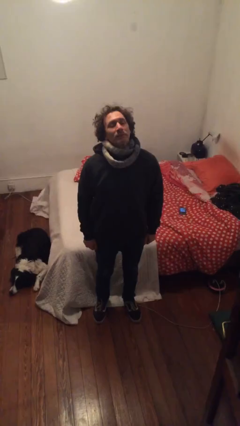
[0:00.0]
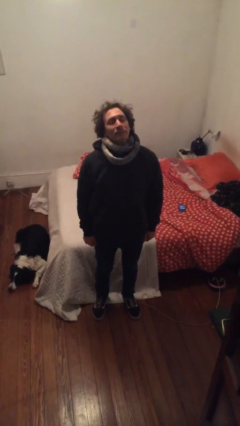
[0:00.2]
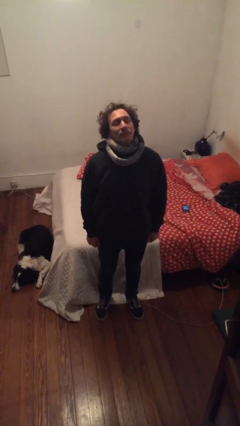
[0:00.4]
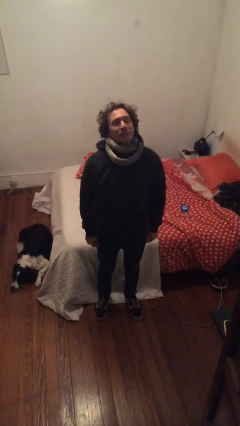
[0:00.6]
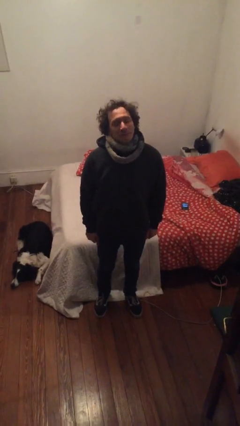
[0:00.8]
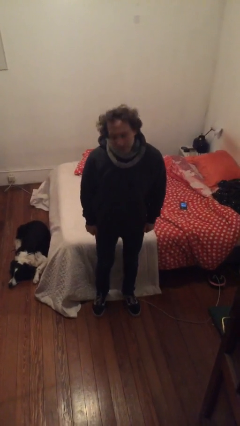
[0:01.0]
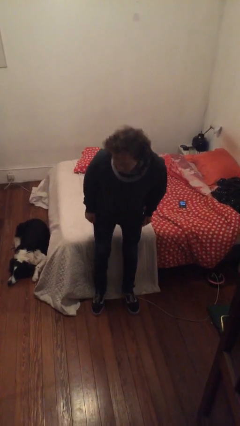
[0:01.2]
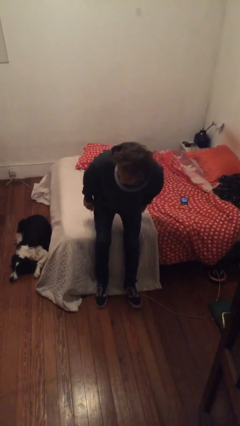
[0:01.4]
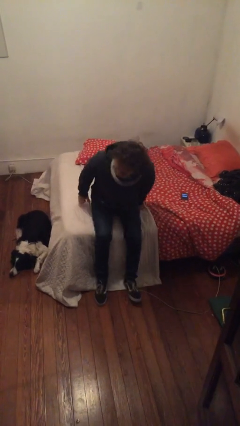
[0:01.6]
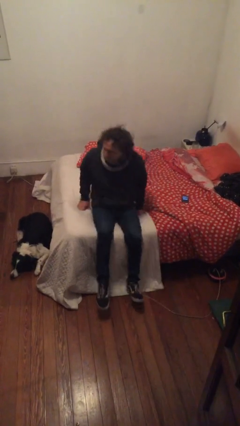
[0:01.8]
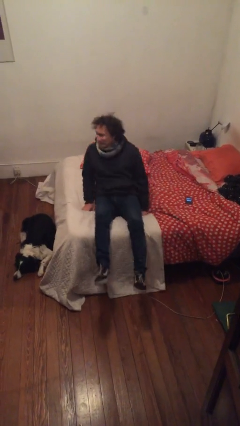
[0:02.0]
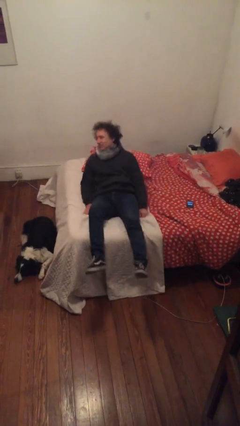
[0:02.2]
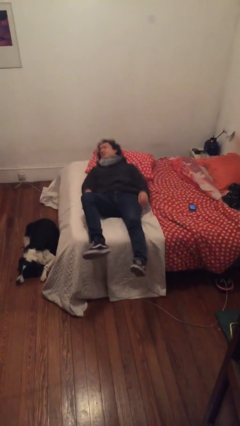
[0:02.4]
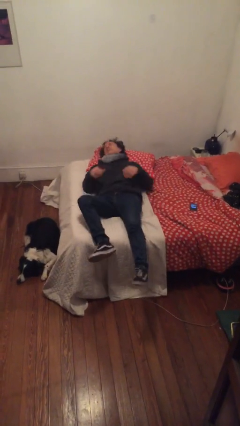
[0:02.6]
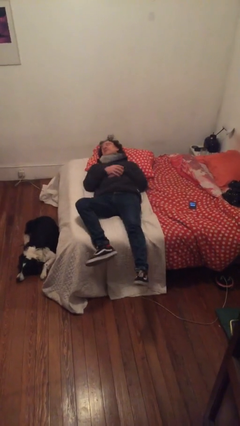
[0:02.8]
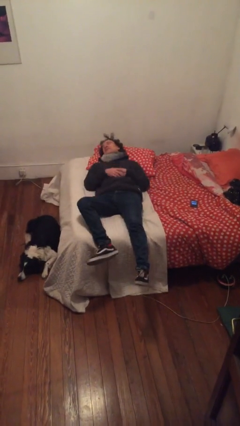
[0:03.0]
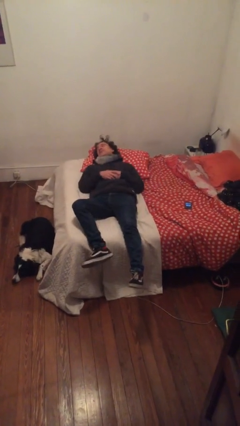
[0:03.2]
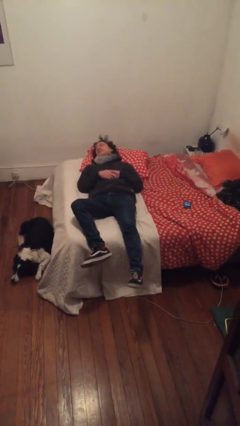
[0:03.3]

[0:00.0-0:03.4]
person lies down on bed

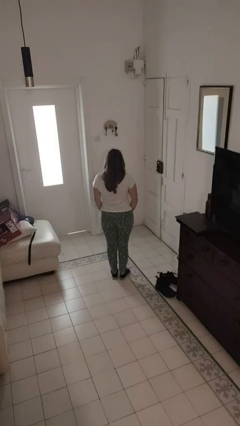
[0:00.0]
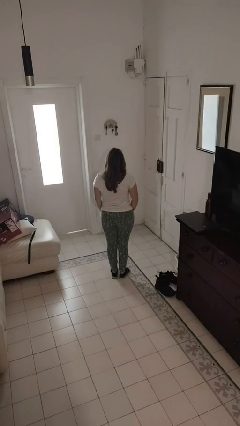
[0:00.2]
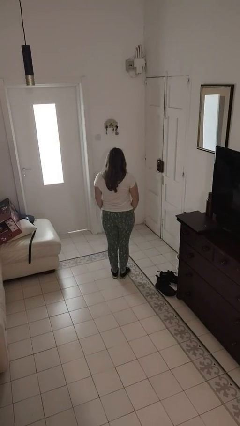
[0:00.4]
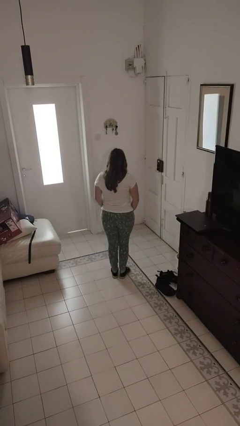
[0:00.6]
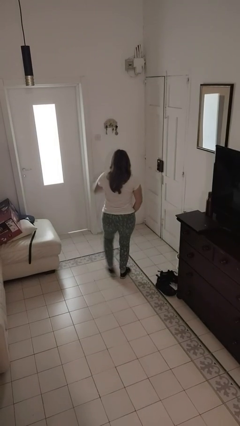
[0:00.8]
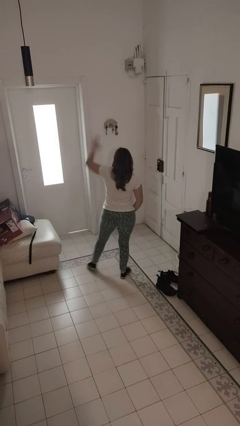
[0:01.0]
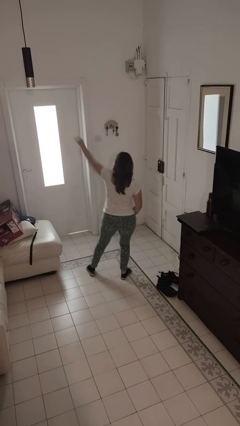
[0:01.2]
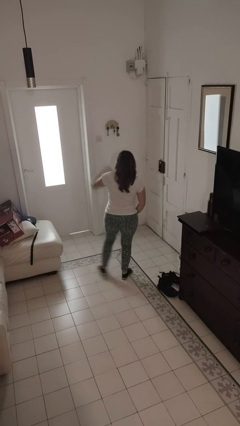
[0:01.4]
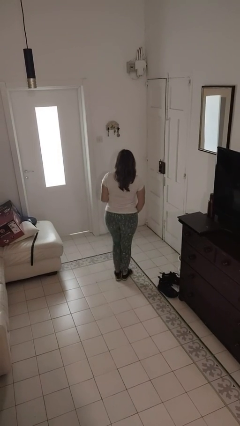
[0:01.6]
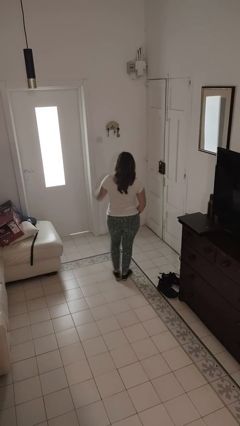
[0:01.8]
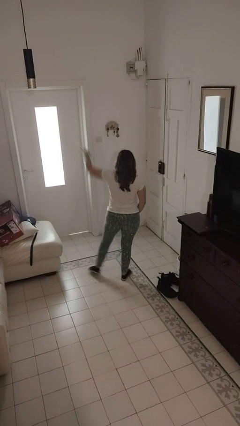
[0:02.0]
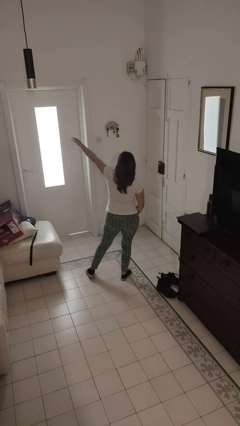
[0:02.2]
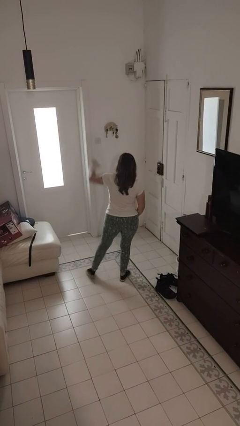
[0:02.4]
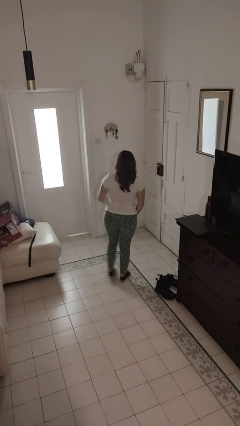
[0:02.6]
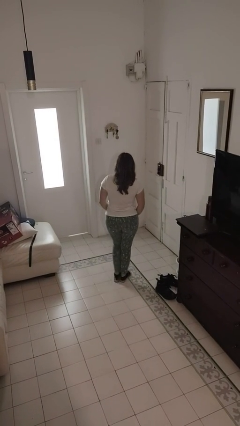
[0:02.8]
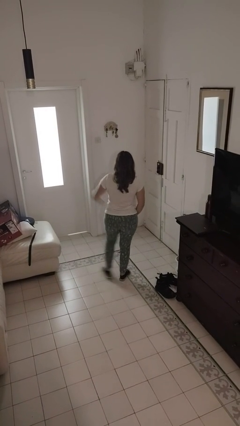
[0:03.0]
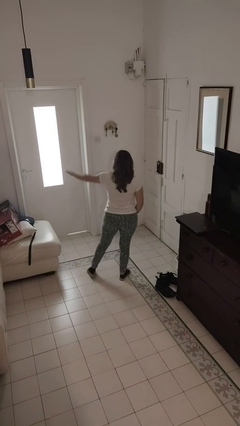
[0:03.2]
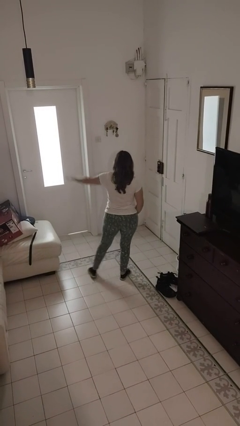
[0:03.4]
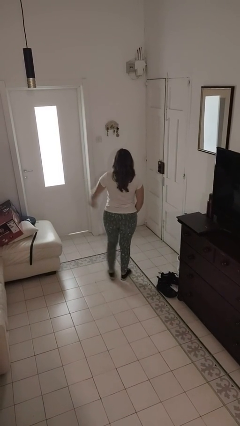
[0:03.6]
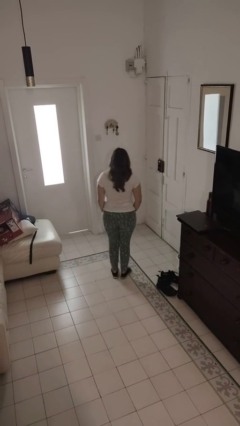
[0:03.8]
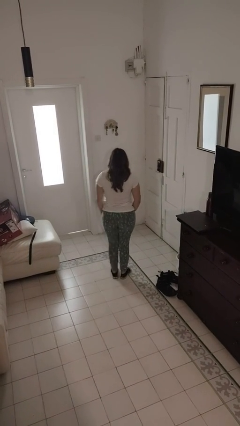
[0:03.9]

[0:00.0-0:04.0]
person dances in place

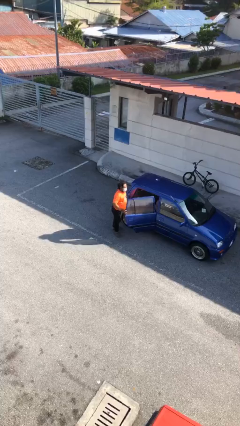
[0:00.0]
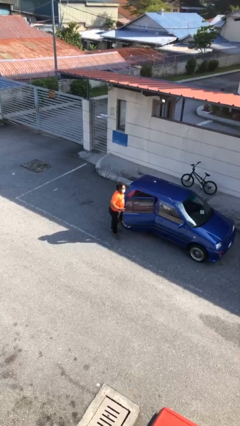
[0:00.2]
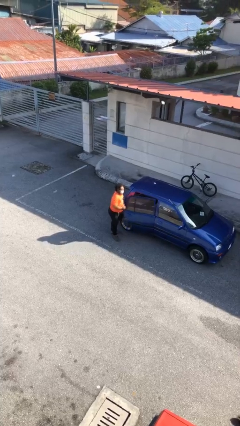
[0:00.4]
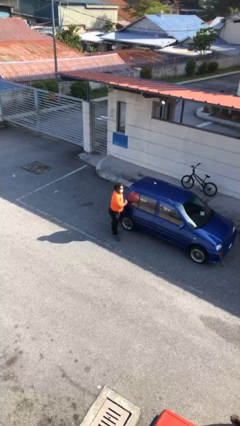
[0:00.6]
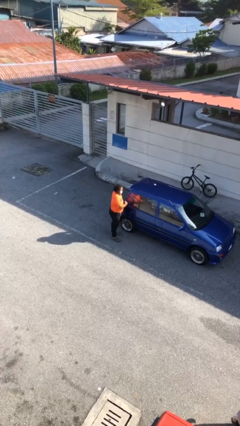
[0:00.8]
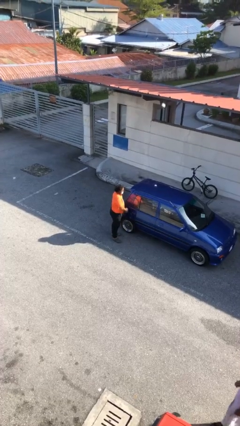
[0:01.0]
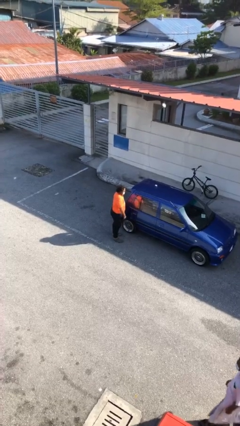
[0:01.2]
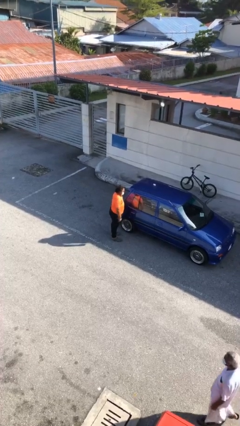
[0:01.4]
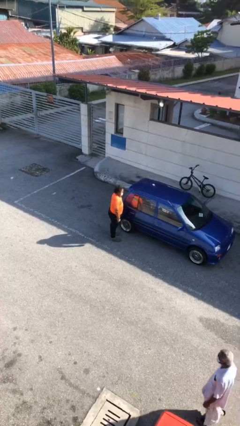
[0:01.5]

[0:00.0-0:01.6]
person closes car door

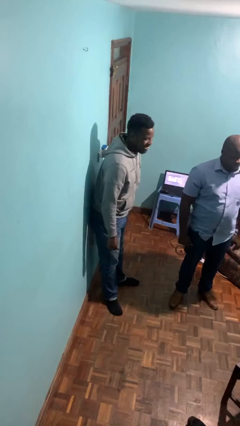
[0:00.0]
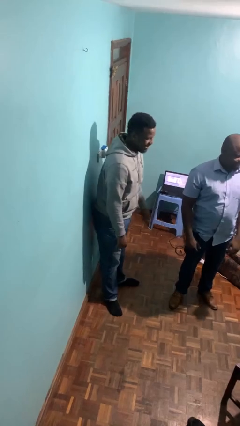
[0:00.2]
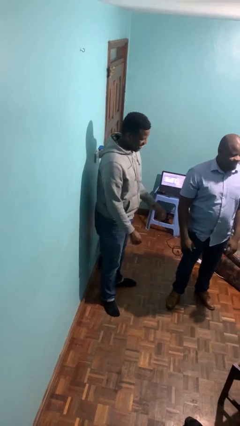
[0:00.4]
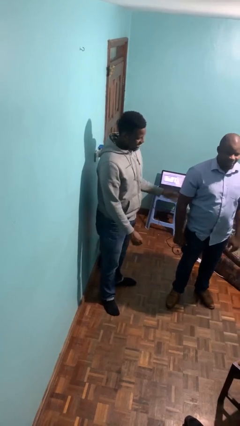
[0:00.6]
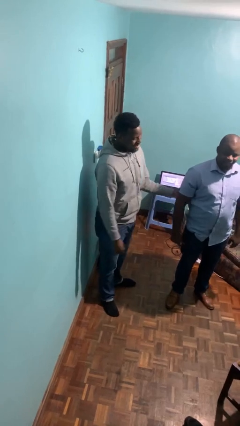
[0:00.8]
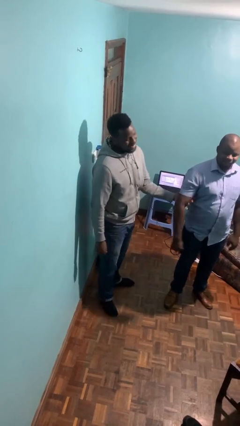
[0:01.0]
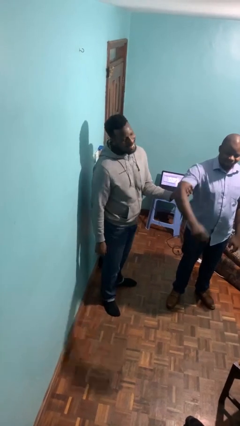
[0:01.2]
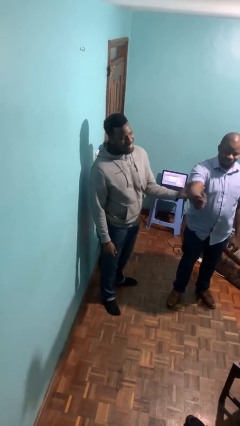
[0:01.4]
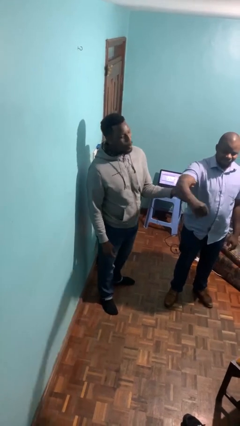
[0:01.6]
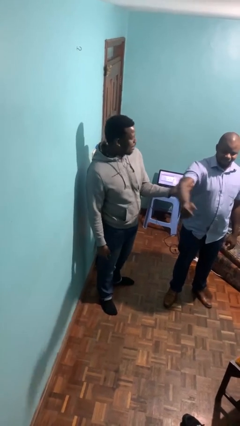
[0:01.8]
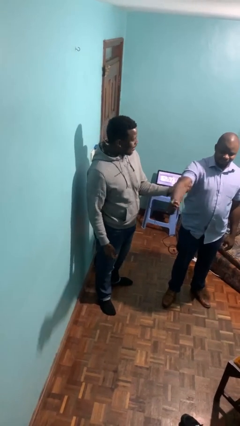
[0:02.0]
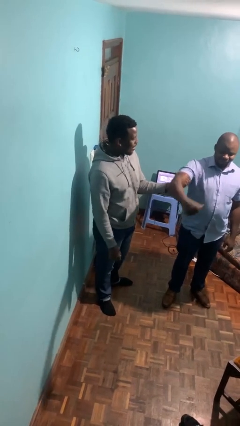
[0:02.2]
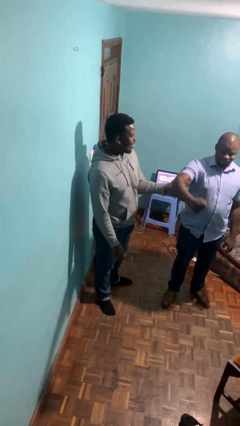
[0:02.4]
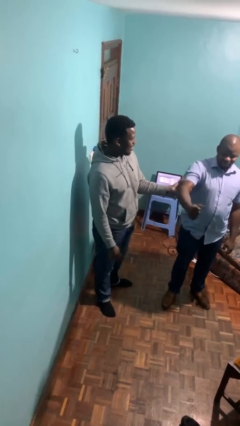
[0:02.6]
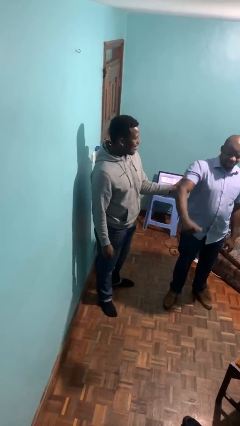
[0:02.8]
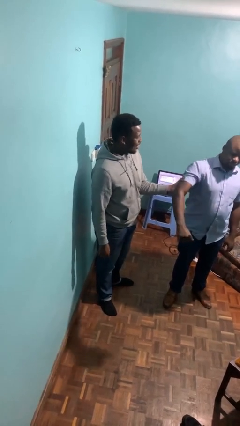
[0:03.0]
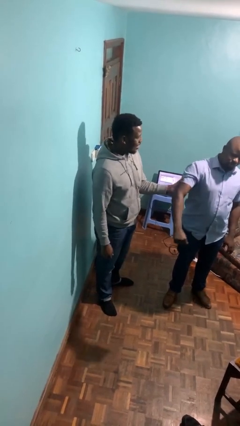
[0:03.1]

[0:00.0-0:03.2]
person grabs person by forearm

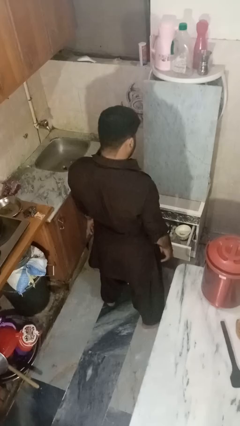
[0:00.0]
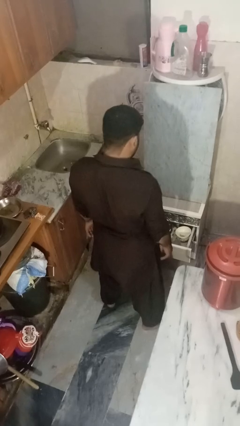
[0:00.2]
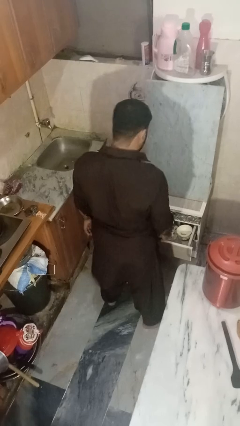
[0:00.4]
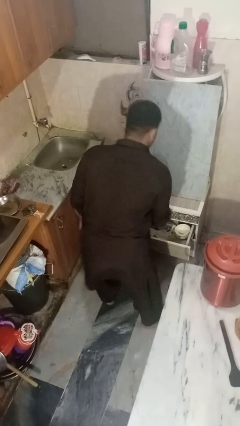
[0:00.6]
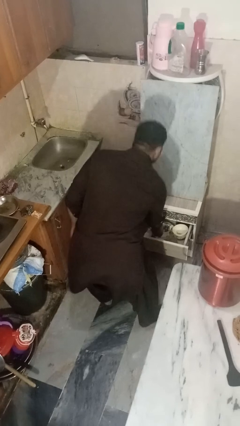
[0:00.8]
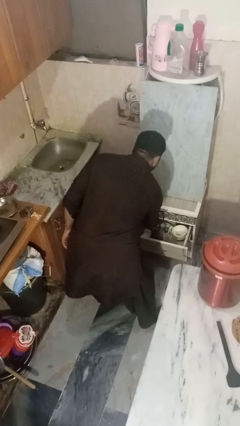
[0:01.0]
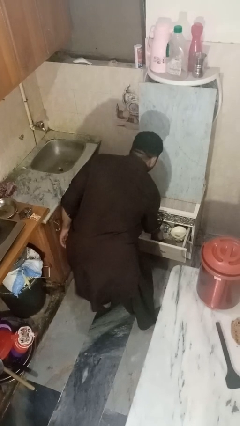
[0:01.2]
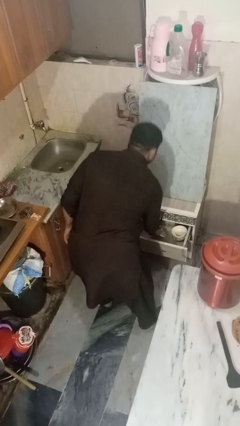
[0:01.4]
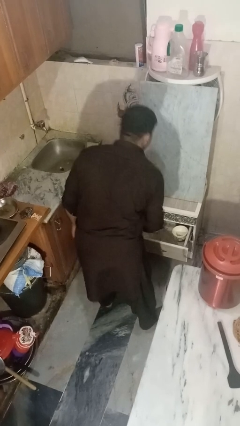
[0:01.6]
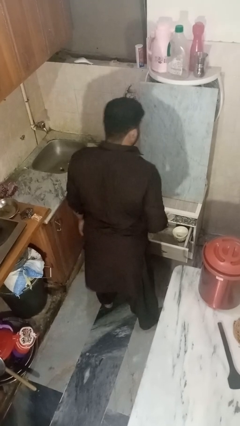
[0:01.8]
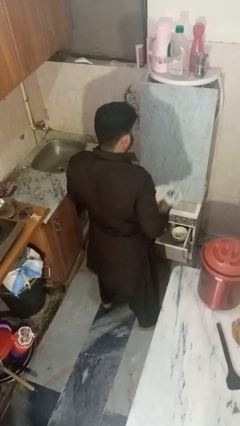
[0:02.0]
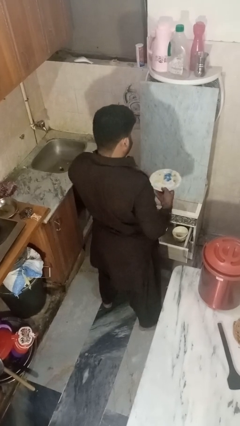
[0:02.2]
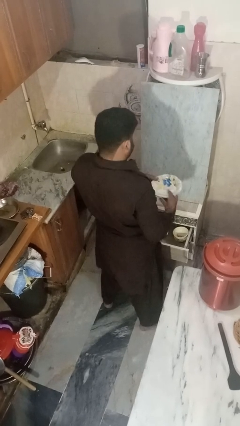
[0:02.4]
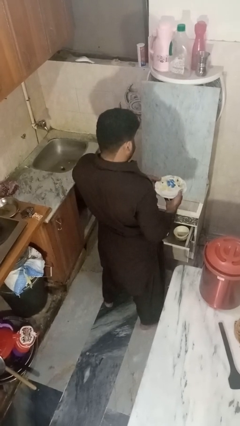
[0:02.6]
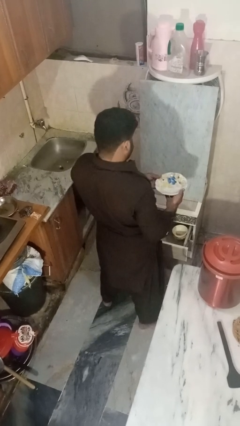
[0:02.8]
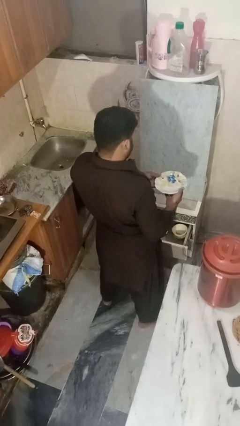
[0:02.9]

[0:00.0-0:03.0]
person takes object from kitchen drawer

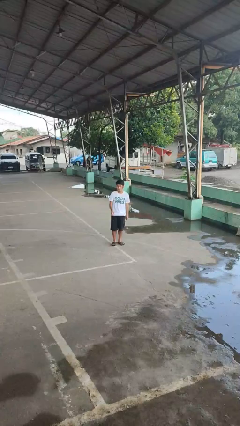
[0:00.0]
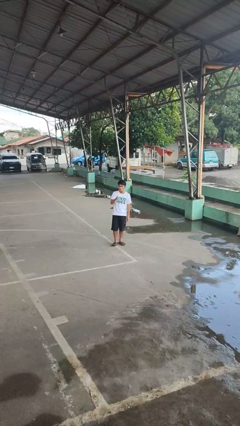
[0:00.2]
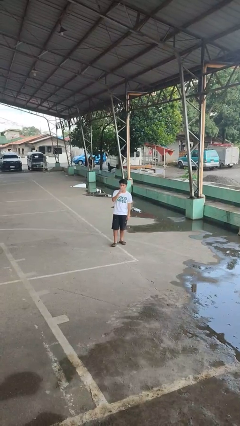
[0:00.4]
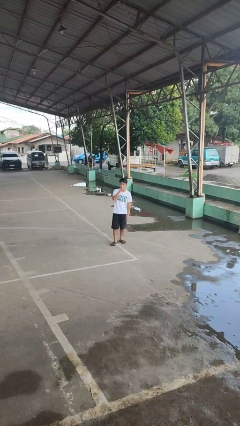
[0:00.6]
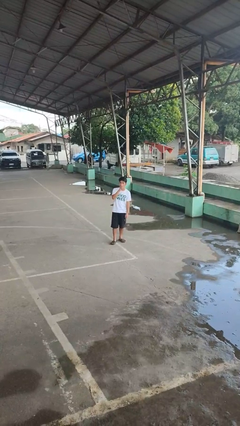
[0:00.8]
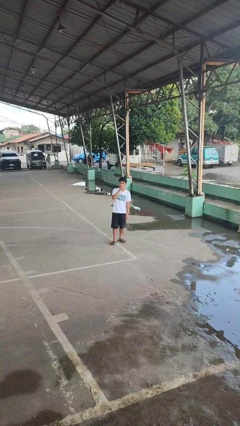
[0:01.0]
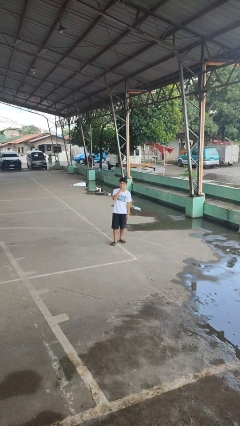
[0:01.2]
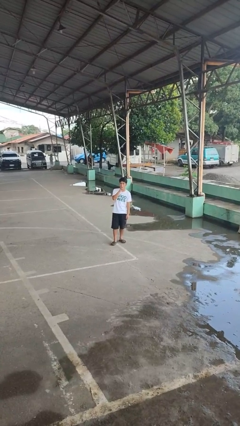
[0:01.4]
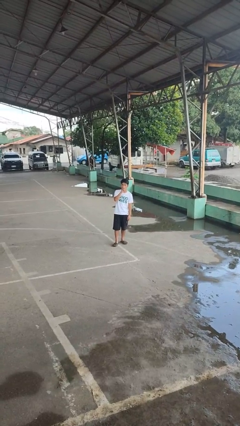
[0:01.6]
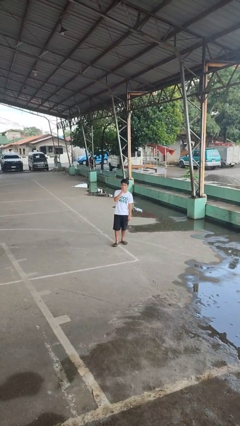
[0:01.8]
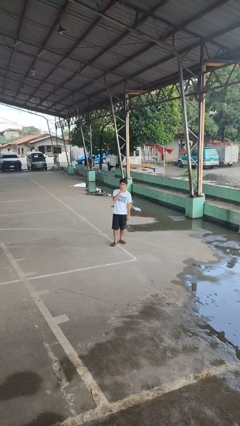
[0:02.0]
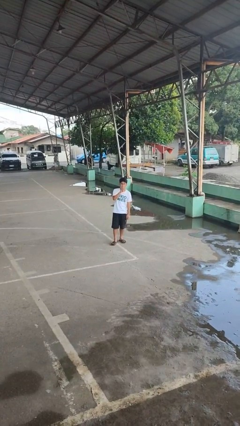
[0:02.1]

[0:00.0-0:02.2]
person gestures be quiet
